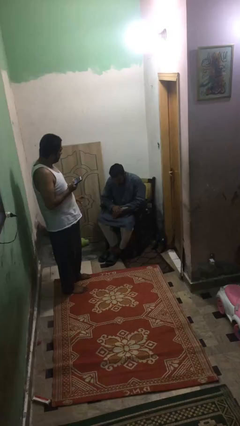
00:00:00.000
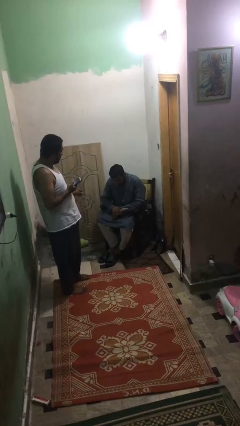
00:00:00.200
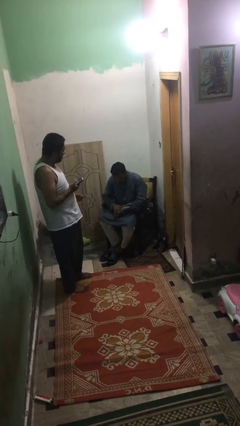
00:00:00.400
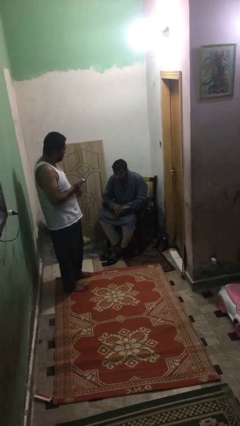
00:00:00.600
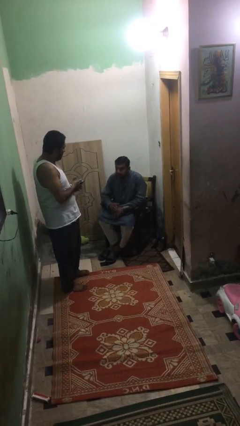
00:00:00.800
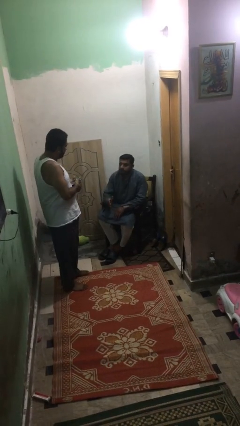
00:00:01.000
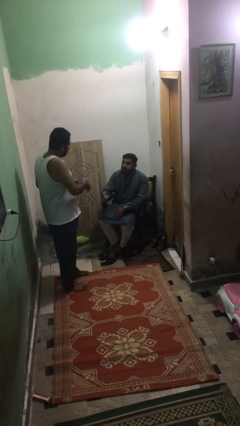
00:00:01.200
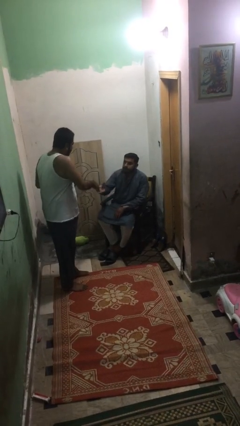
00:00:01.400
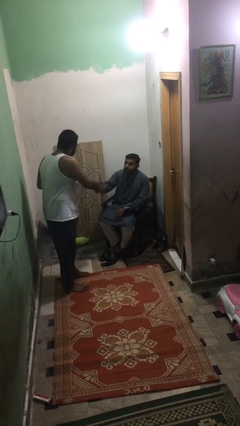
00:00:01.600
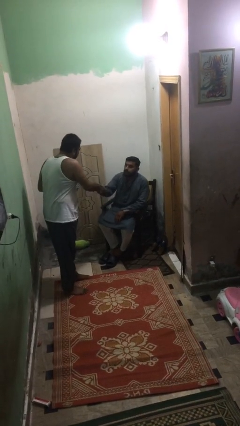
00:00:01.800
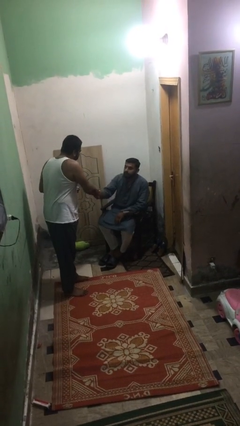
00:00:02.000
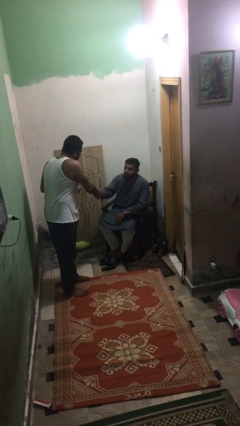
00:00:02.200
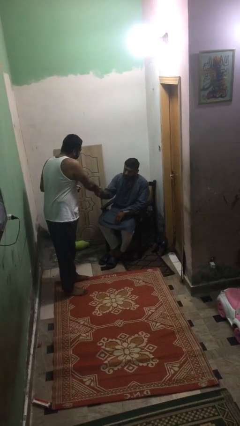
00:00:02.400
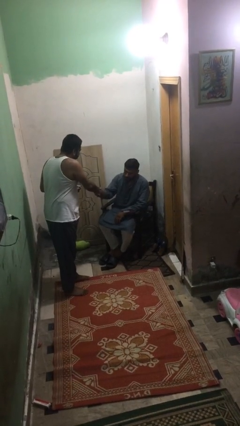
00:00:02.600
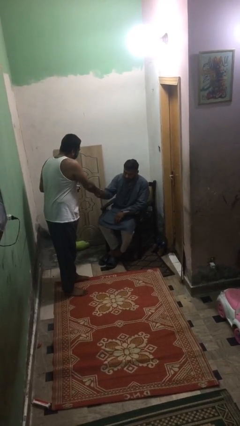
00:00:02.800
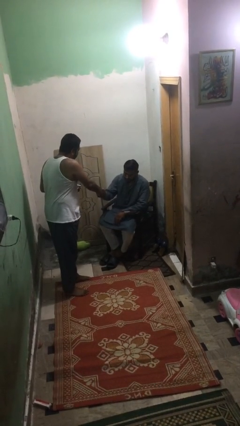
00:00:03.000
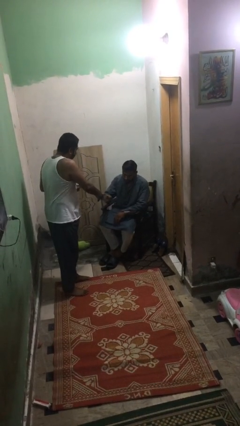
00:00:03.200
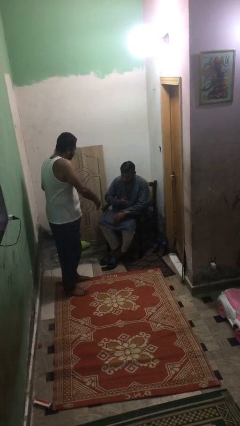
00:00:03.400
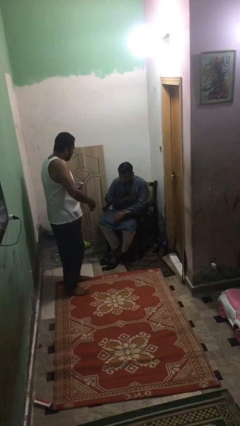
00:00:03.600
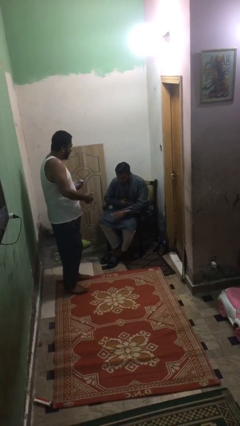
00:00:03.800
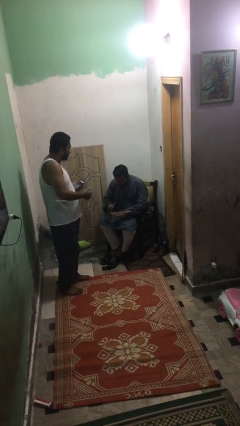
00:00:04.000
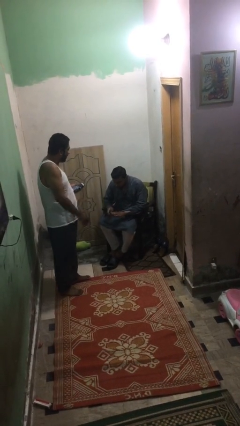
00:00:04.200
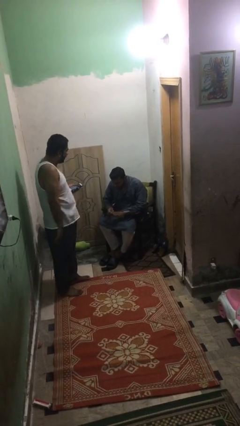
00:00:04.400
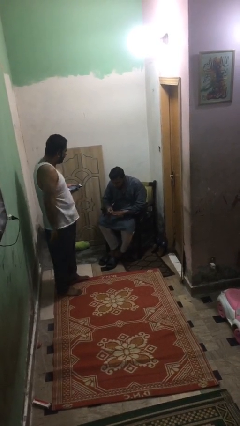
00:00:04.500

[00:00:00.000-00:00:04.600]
person shakes hand

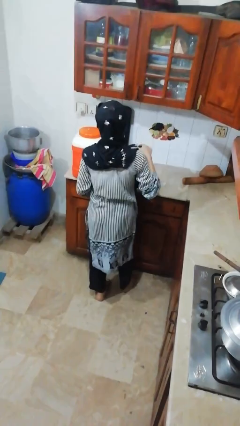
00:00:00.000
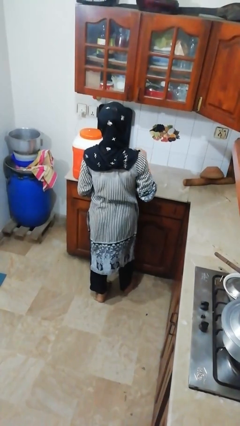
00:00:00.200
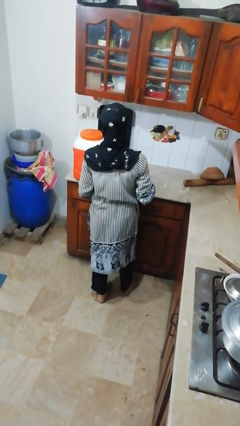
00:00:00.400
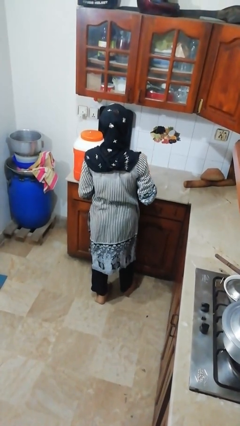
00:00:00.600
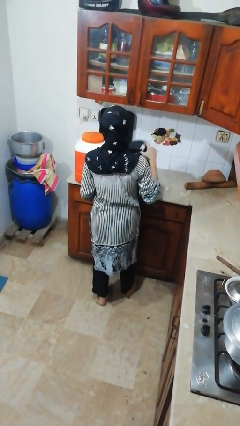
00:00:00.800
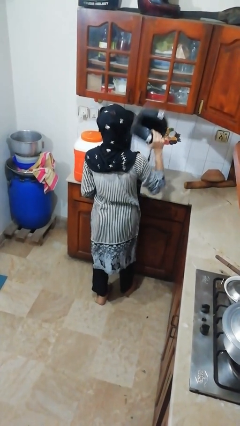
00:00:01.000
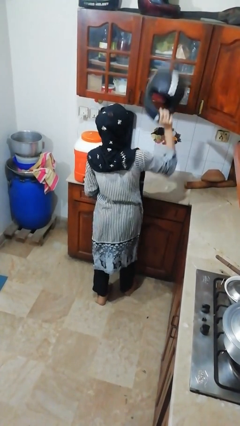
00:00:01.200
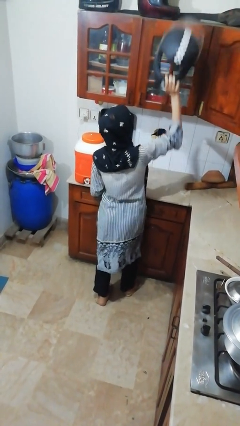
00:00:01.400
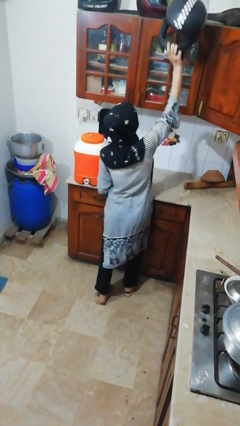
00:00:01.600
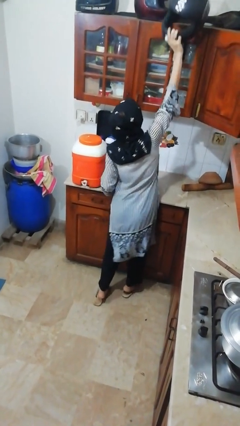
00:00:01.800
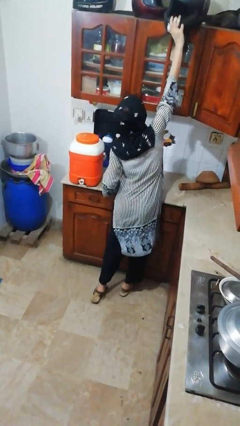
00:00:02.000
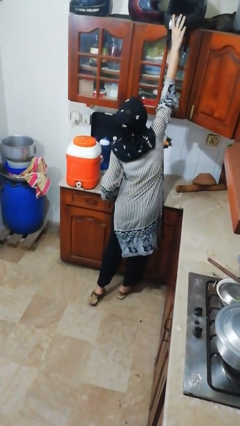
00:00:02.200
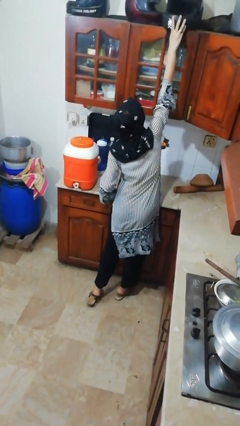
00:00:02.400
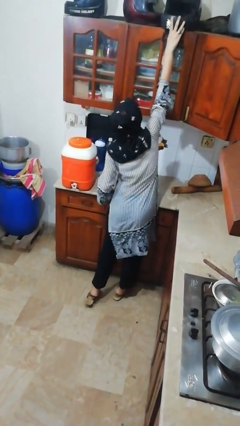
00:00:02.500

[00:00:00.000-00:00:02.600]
person puts down object on shelf

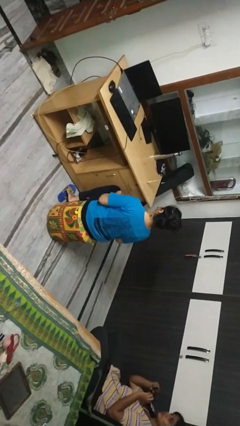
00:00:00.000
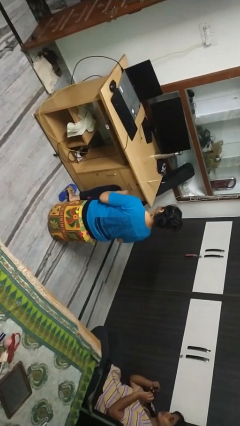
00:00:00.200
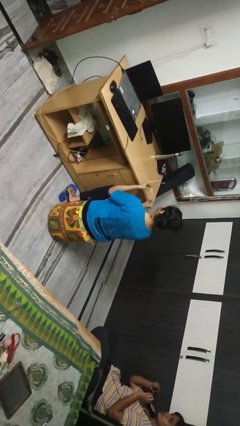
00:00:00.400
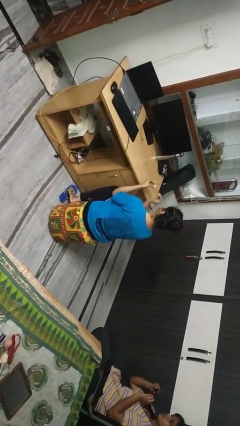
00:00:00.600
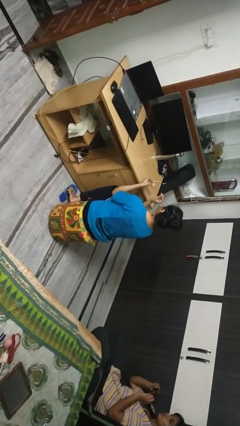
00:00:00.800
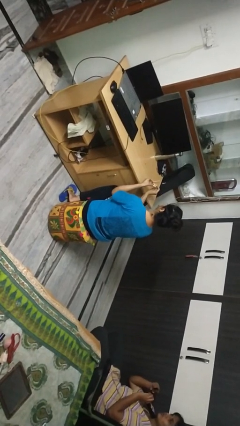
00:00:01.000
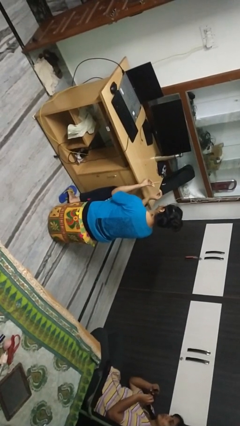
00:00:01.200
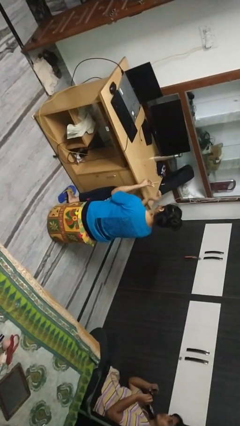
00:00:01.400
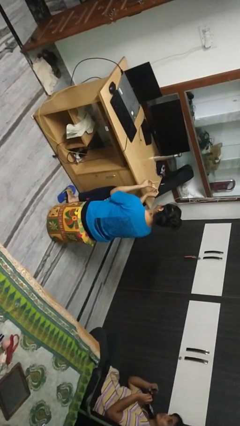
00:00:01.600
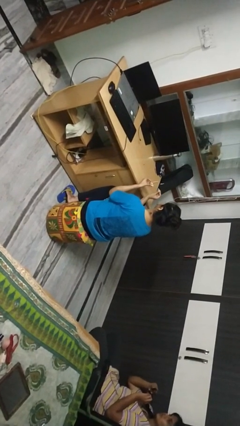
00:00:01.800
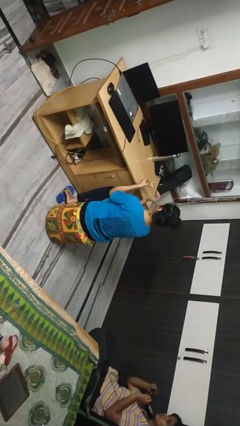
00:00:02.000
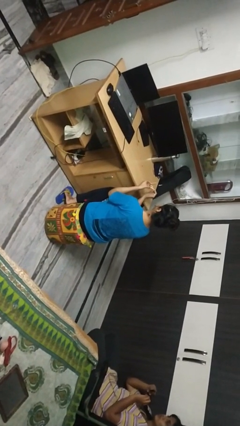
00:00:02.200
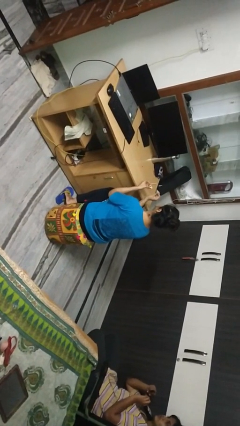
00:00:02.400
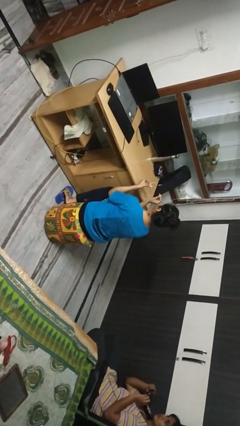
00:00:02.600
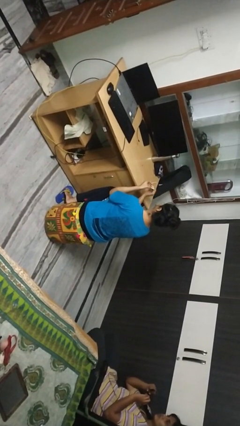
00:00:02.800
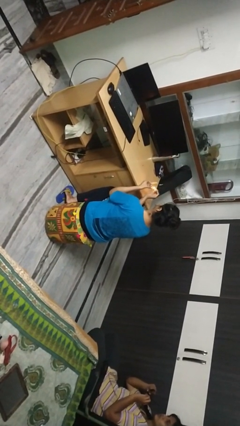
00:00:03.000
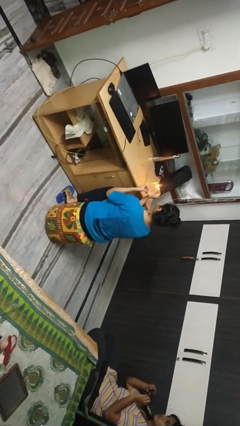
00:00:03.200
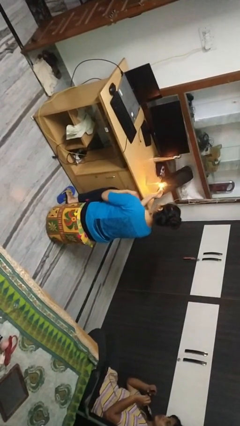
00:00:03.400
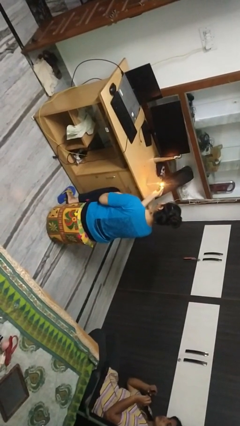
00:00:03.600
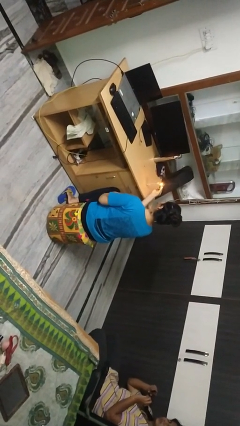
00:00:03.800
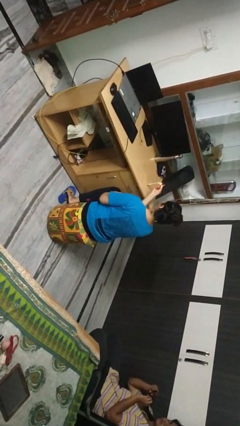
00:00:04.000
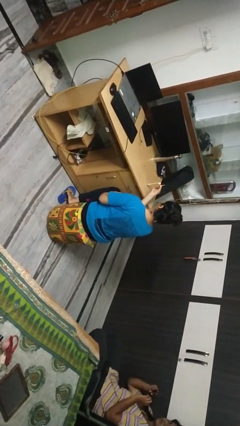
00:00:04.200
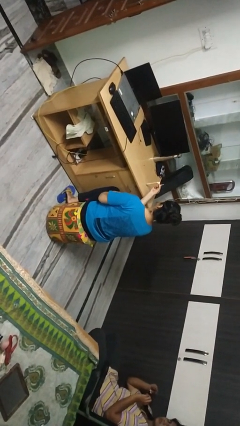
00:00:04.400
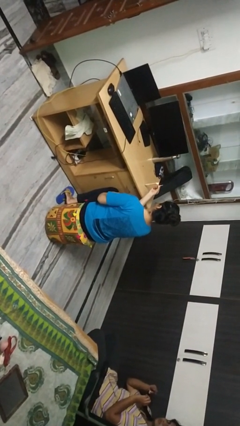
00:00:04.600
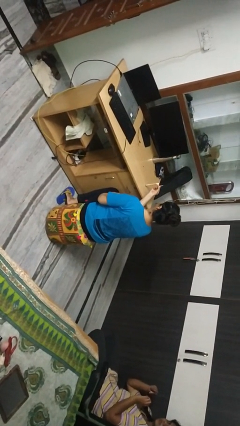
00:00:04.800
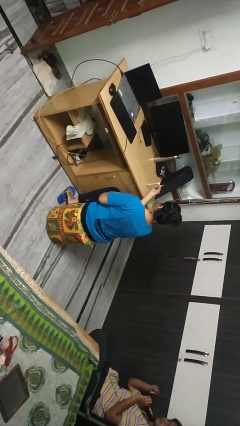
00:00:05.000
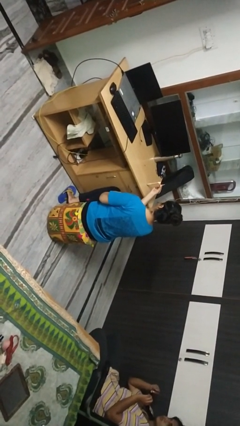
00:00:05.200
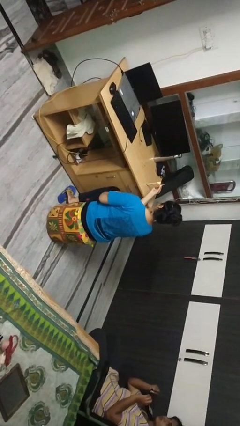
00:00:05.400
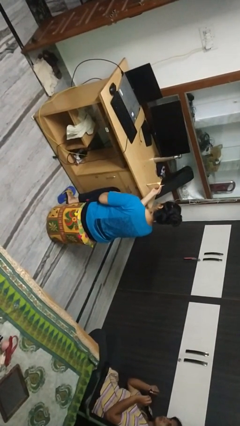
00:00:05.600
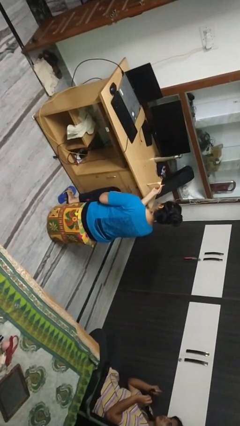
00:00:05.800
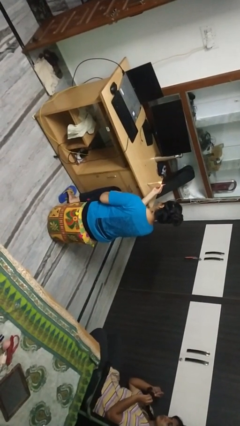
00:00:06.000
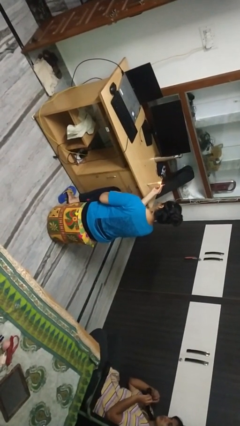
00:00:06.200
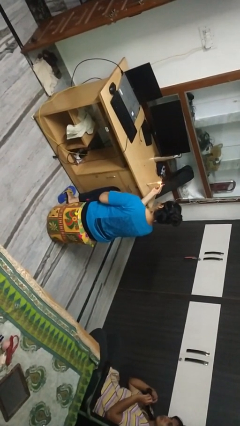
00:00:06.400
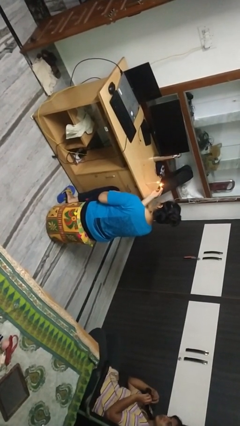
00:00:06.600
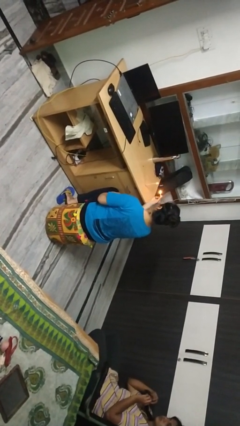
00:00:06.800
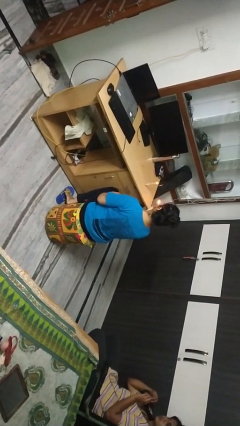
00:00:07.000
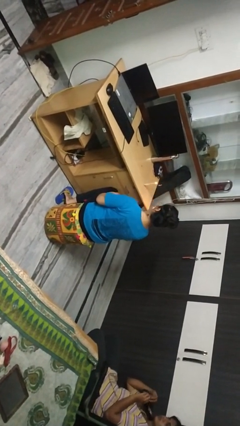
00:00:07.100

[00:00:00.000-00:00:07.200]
person lights candle

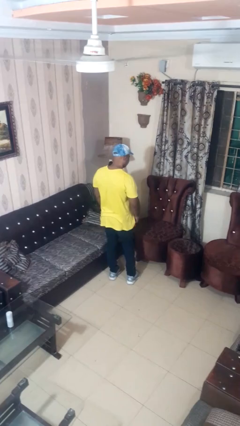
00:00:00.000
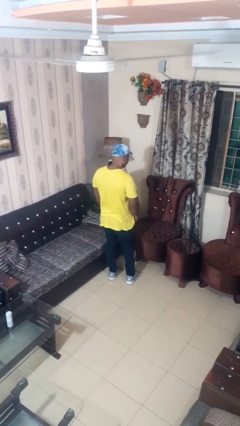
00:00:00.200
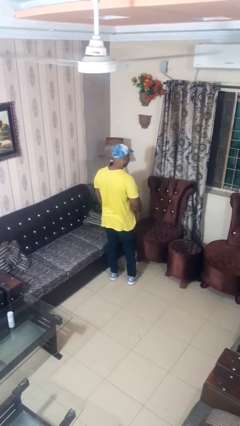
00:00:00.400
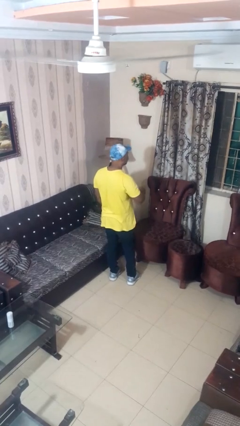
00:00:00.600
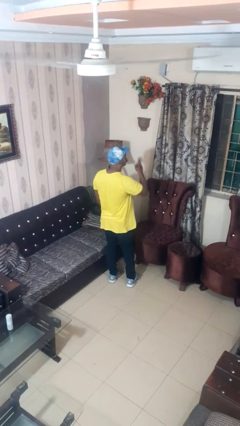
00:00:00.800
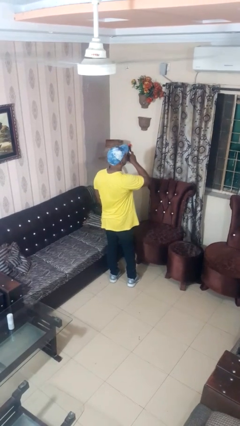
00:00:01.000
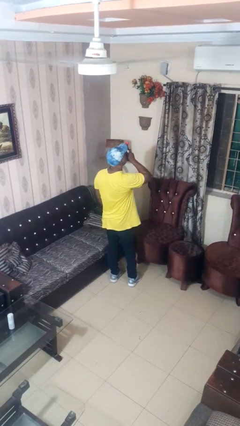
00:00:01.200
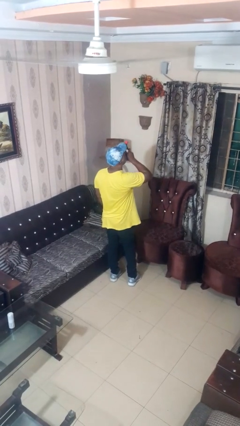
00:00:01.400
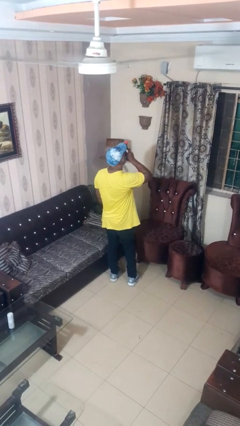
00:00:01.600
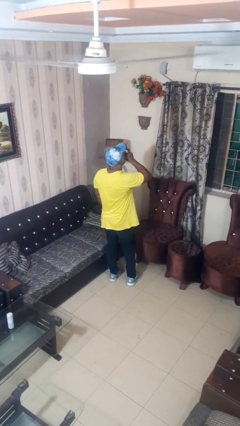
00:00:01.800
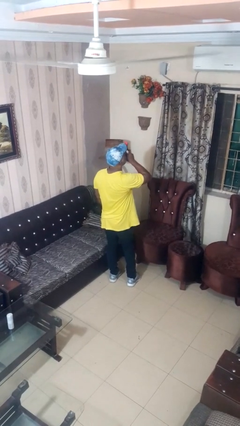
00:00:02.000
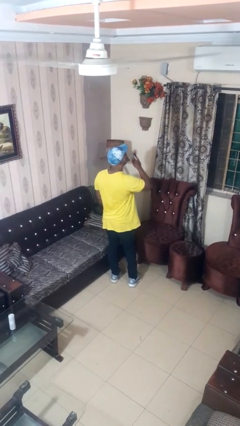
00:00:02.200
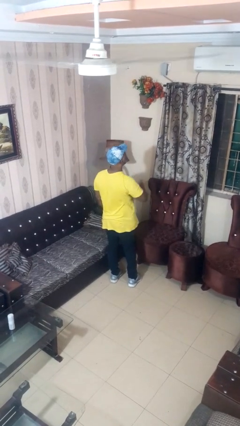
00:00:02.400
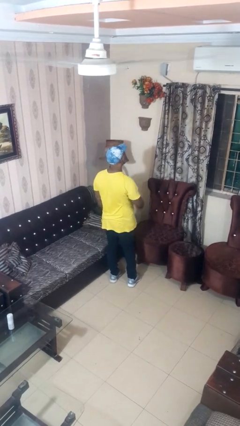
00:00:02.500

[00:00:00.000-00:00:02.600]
person vapes

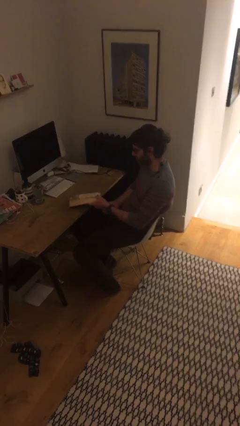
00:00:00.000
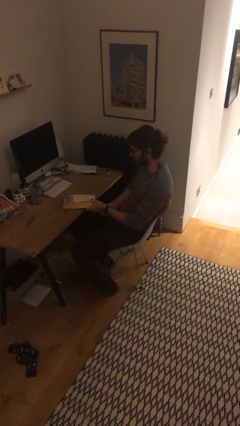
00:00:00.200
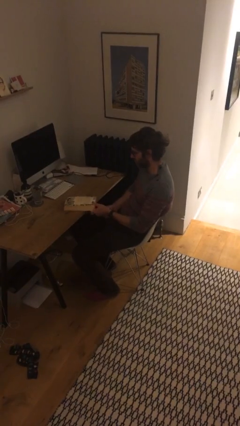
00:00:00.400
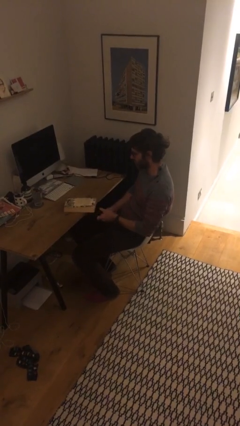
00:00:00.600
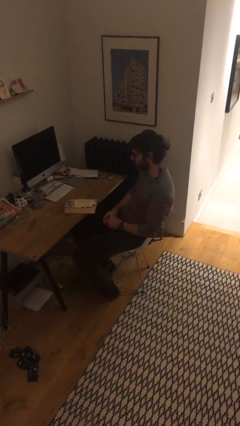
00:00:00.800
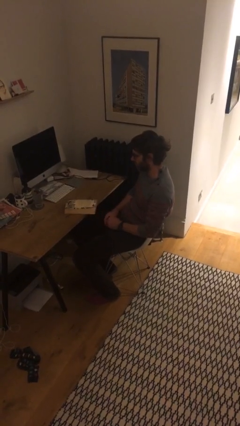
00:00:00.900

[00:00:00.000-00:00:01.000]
person puts down object on table
